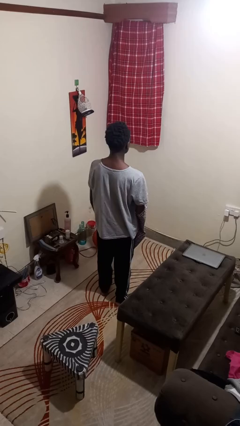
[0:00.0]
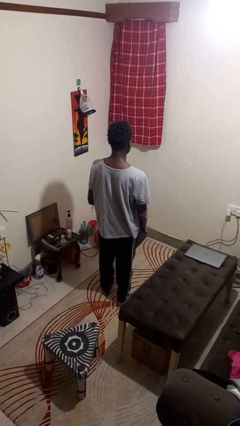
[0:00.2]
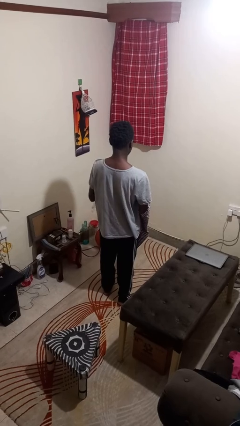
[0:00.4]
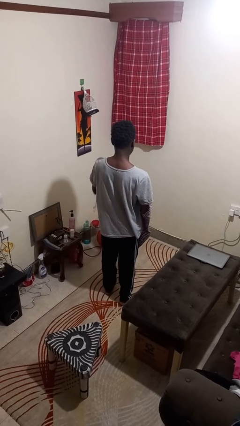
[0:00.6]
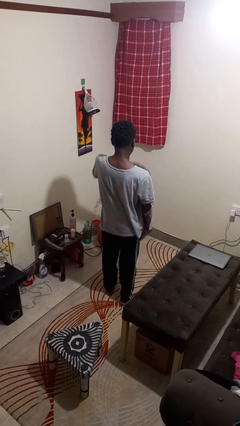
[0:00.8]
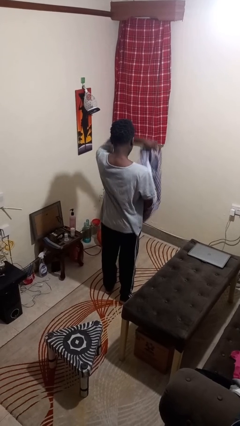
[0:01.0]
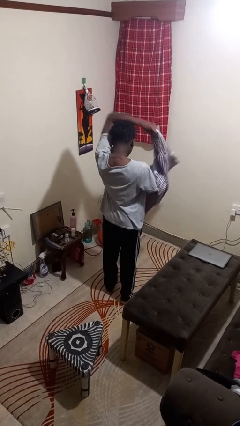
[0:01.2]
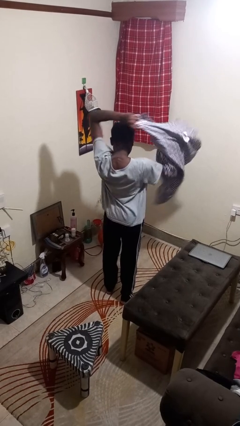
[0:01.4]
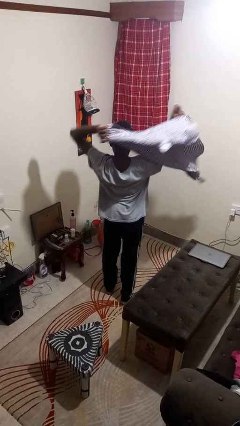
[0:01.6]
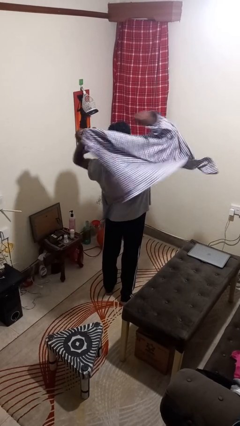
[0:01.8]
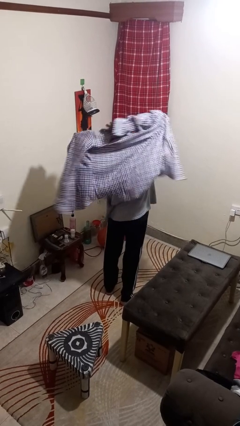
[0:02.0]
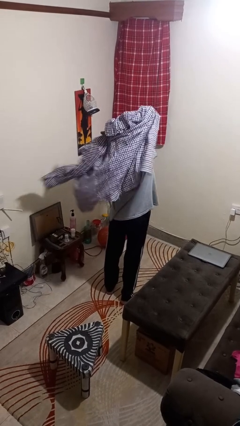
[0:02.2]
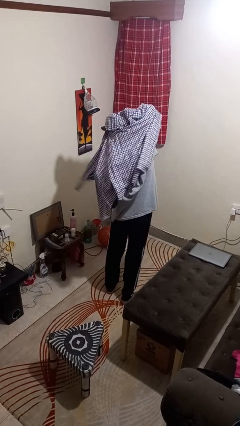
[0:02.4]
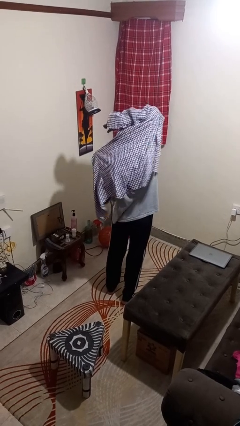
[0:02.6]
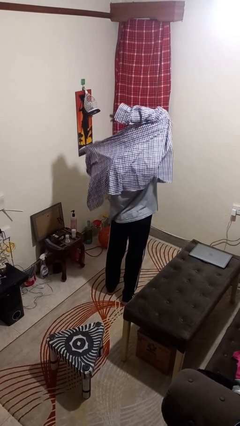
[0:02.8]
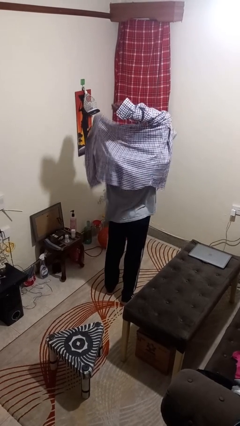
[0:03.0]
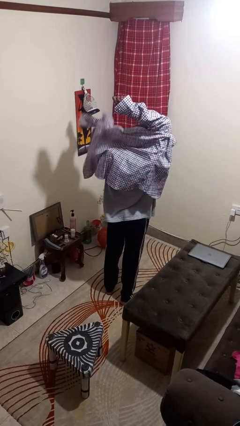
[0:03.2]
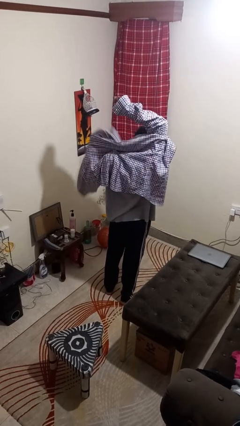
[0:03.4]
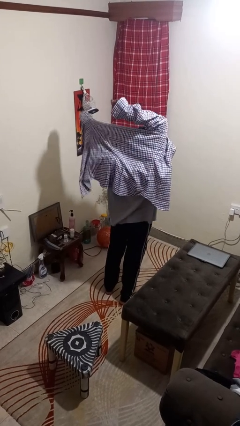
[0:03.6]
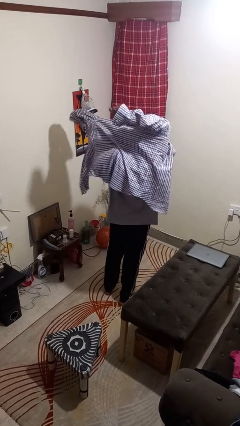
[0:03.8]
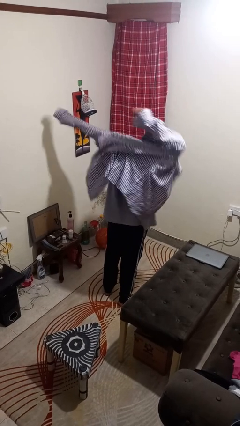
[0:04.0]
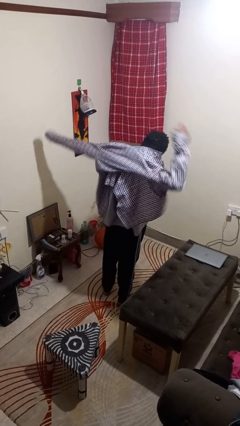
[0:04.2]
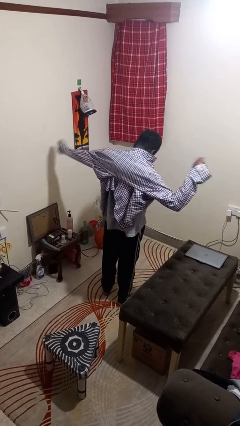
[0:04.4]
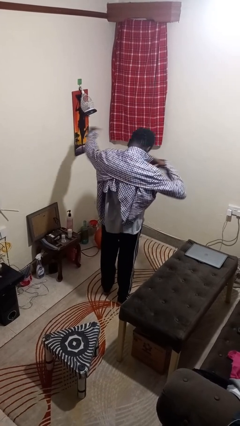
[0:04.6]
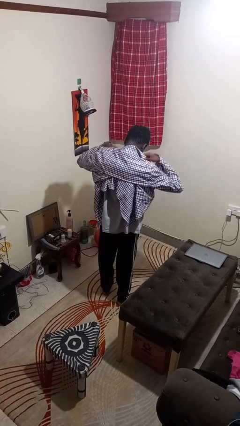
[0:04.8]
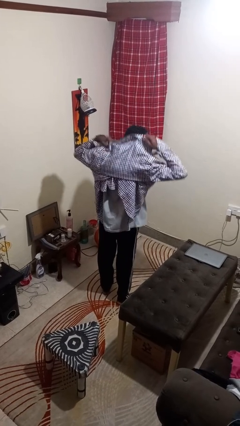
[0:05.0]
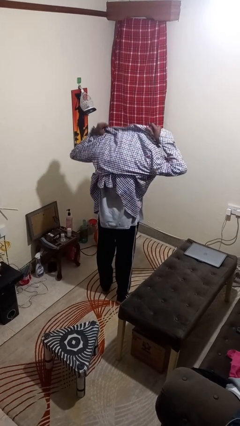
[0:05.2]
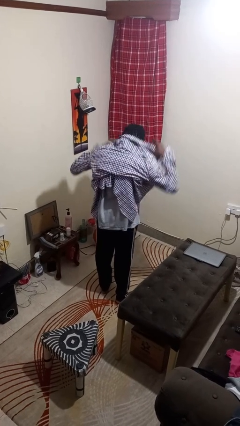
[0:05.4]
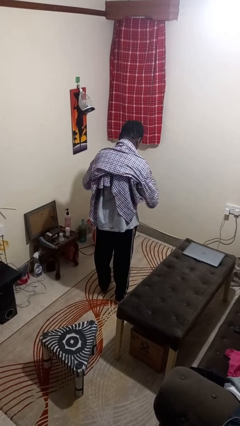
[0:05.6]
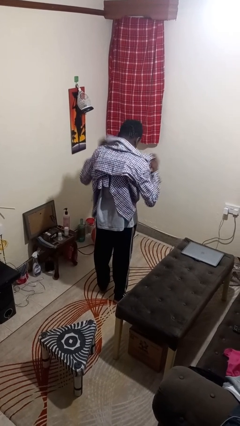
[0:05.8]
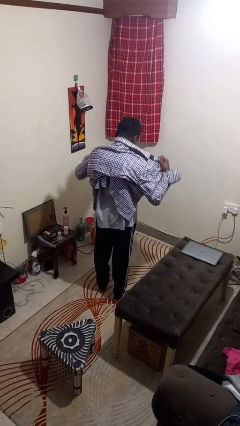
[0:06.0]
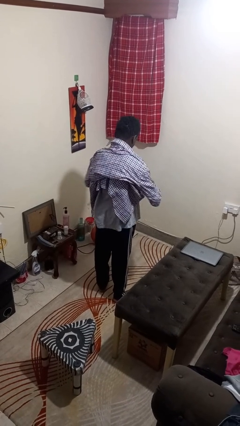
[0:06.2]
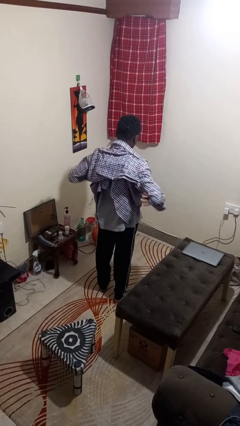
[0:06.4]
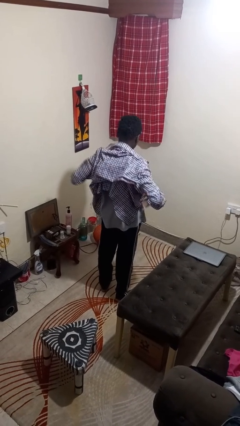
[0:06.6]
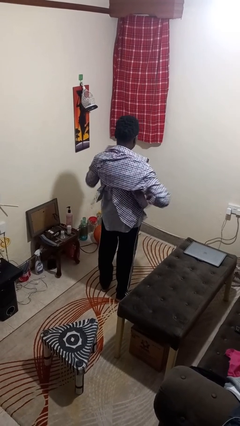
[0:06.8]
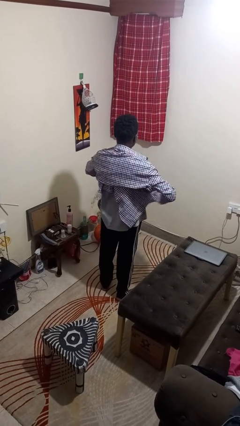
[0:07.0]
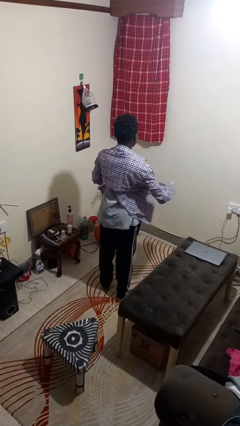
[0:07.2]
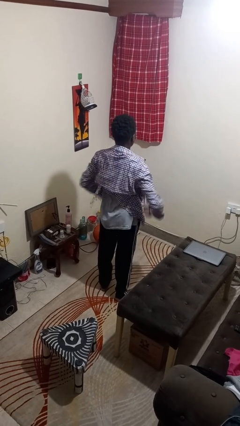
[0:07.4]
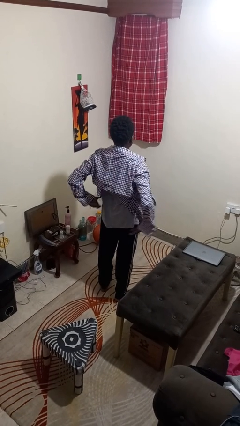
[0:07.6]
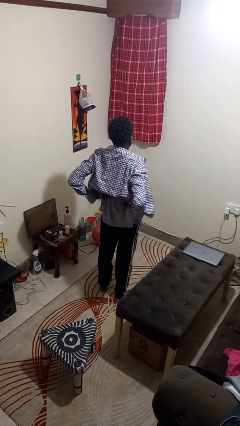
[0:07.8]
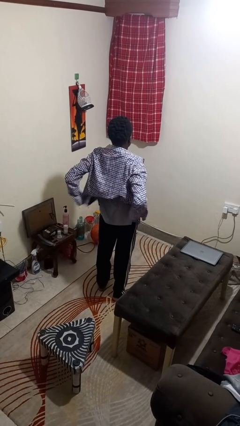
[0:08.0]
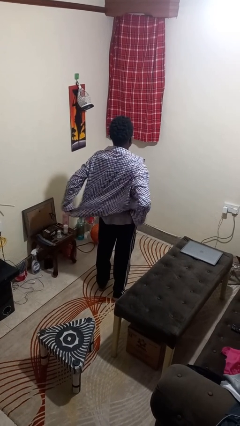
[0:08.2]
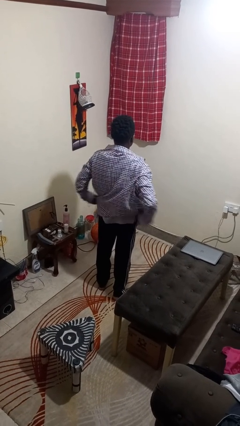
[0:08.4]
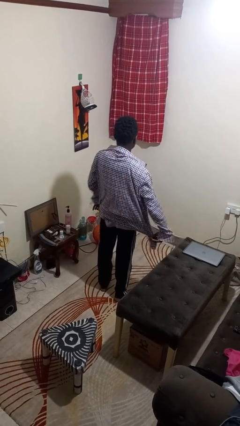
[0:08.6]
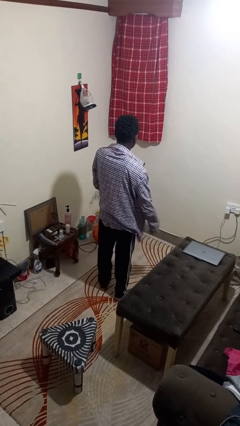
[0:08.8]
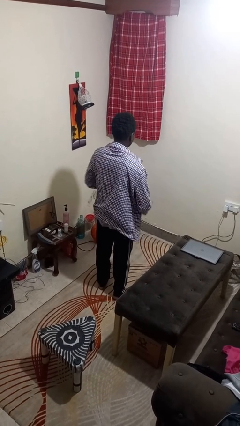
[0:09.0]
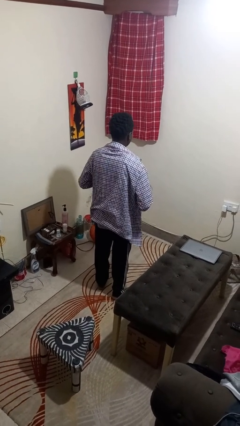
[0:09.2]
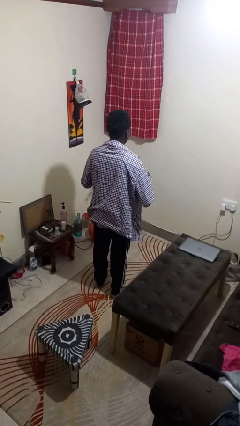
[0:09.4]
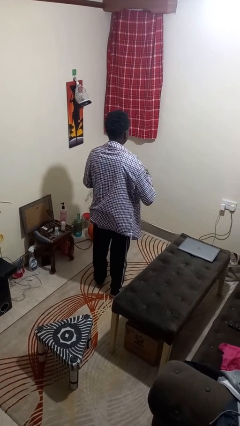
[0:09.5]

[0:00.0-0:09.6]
person puts on shirt

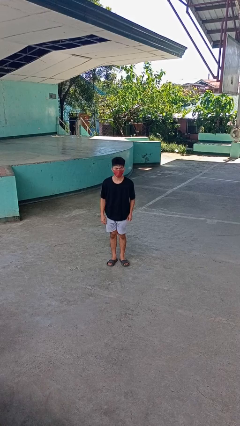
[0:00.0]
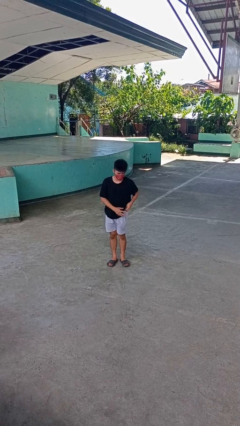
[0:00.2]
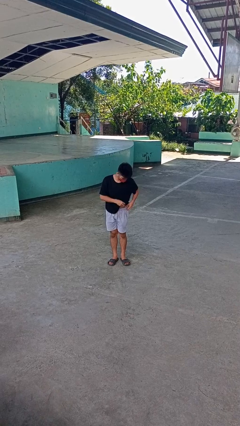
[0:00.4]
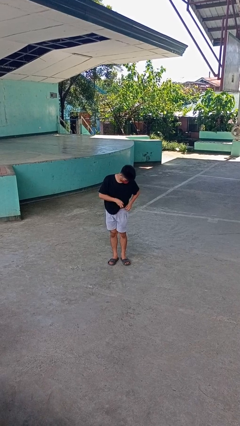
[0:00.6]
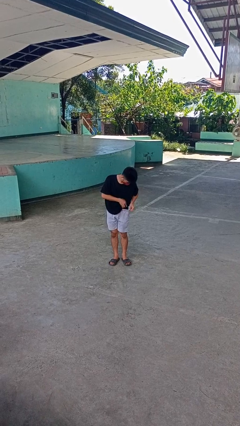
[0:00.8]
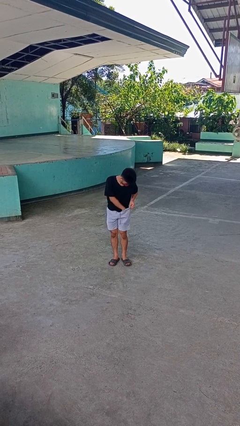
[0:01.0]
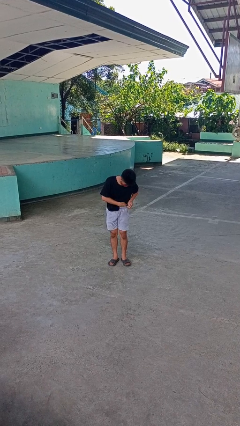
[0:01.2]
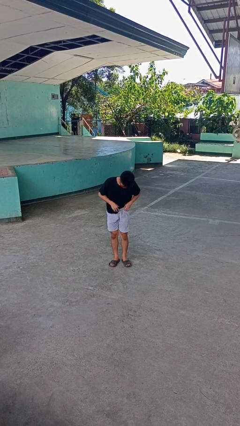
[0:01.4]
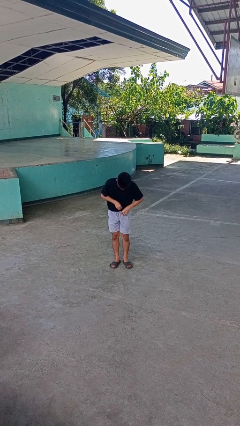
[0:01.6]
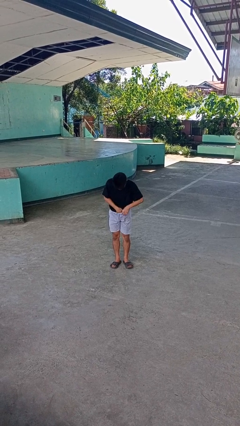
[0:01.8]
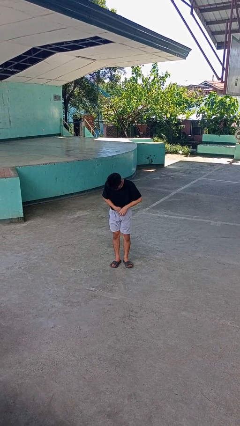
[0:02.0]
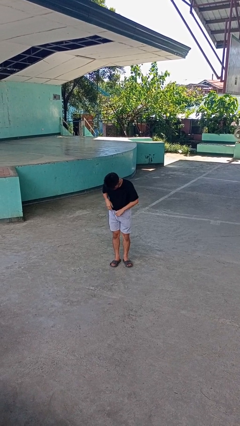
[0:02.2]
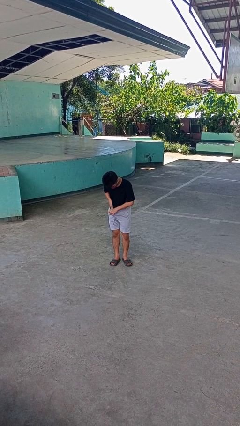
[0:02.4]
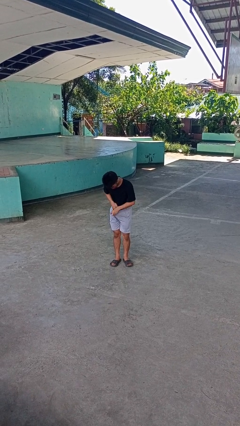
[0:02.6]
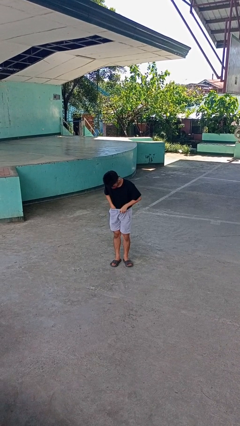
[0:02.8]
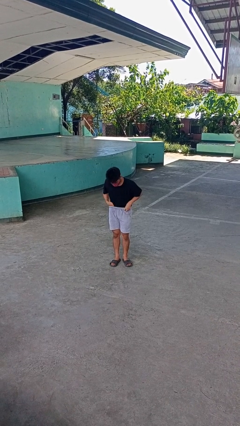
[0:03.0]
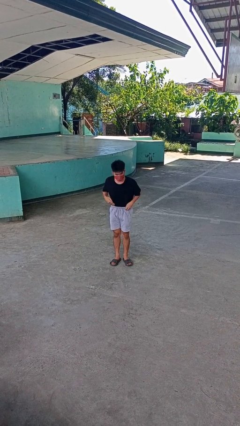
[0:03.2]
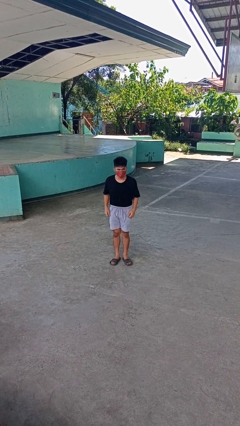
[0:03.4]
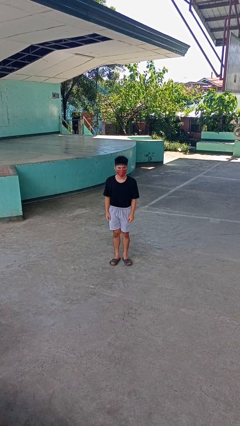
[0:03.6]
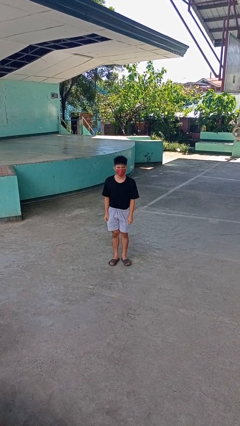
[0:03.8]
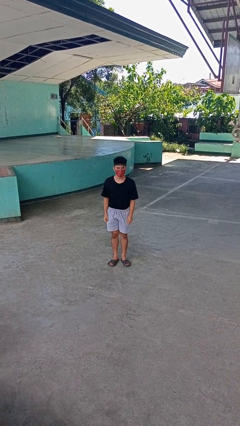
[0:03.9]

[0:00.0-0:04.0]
person tucks in shirt

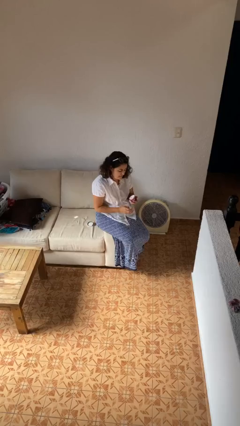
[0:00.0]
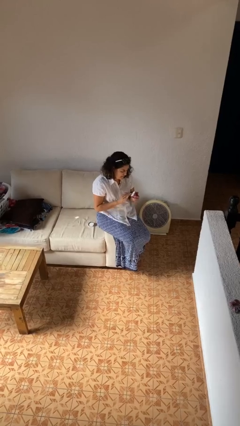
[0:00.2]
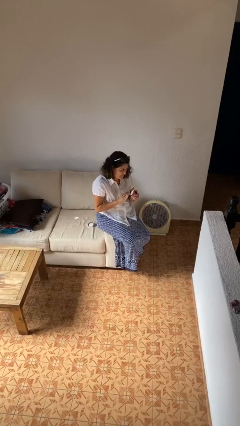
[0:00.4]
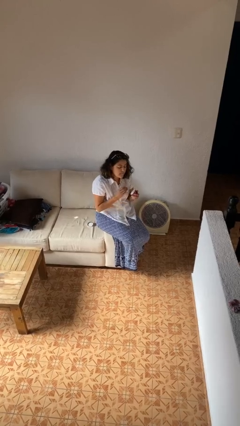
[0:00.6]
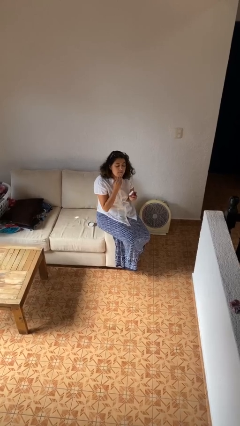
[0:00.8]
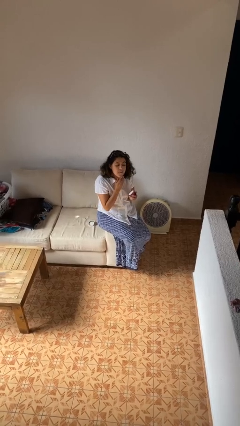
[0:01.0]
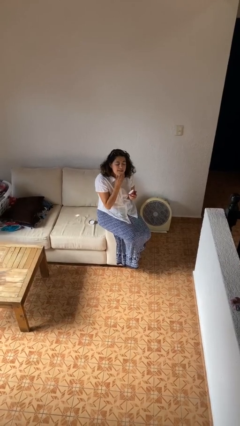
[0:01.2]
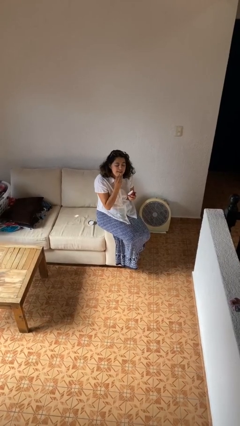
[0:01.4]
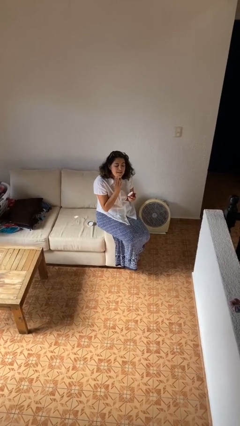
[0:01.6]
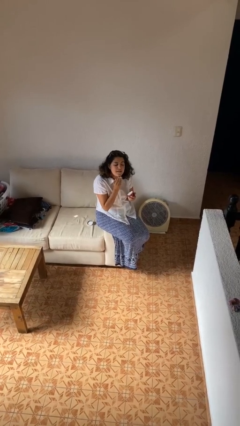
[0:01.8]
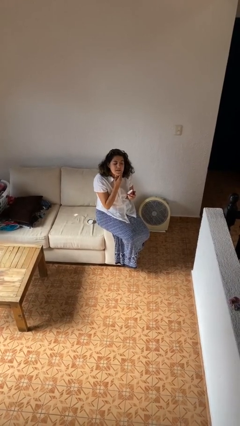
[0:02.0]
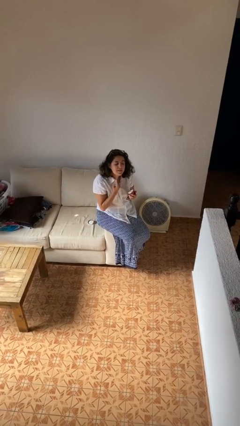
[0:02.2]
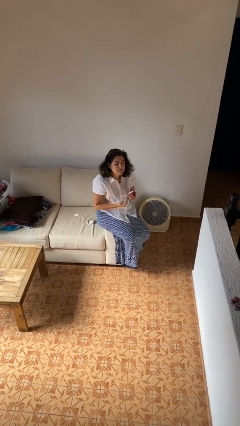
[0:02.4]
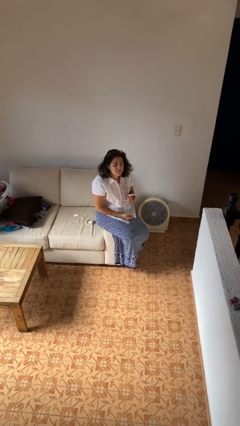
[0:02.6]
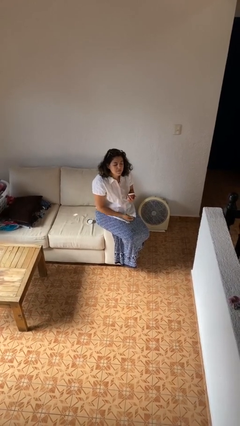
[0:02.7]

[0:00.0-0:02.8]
person applies facial moisturizer

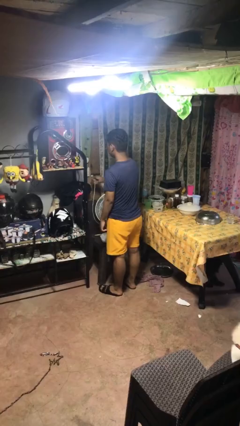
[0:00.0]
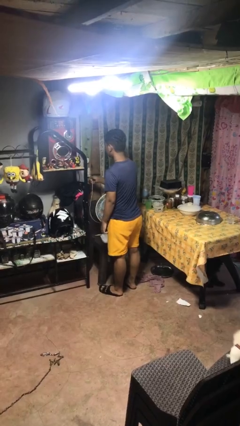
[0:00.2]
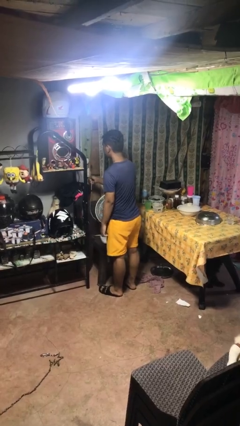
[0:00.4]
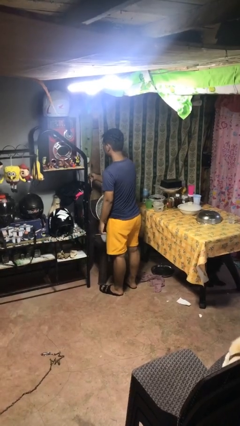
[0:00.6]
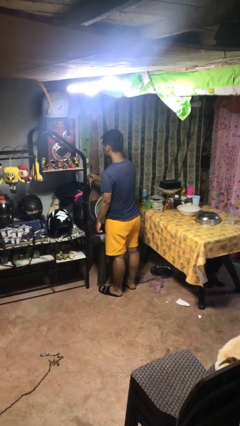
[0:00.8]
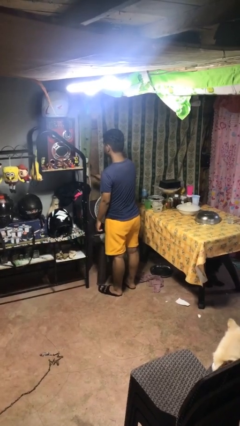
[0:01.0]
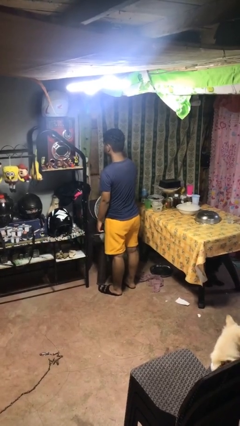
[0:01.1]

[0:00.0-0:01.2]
person plugs into electrical socket

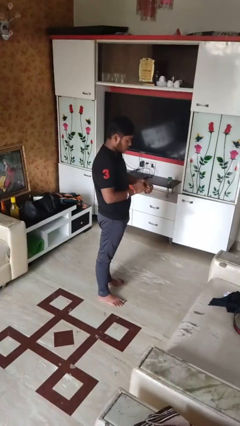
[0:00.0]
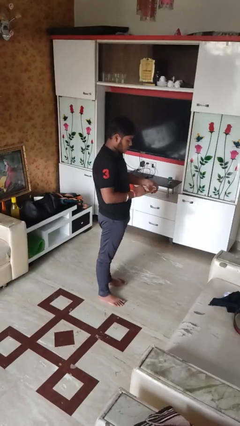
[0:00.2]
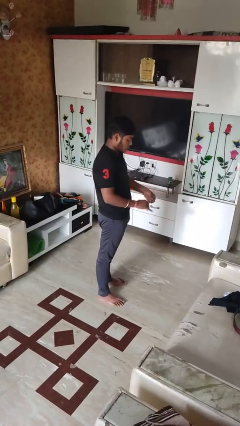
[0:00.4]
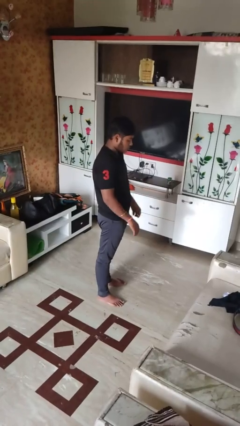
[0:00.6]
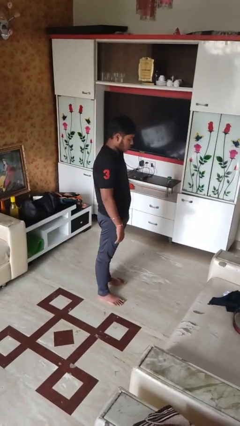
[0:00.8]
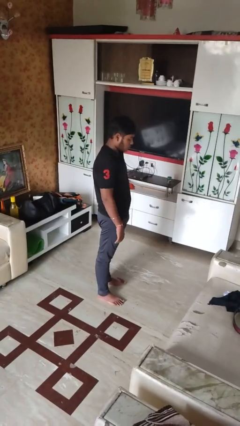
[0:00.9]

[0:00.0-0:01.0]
person takes off ring
